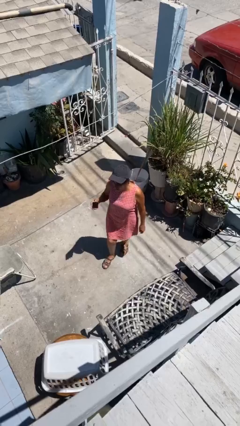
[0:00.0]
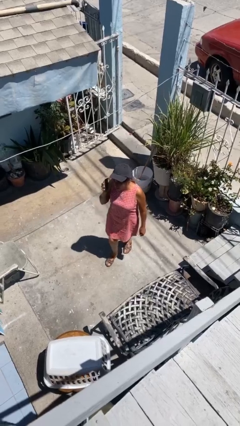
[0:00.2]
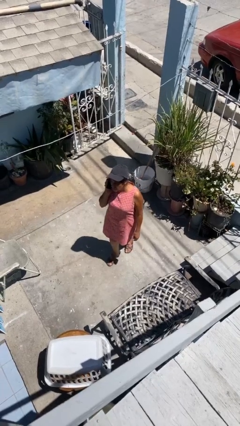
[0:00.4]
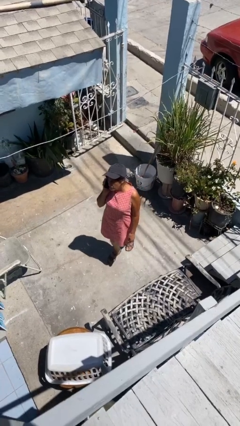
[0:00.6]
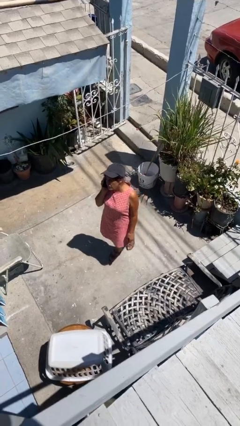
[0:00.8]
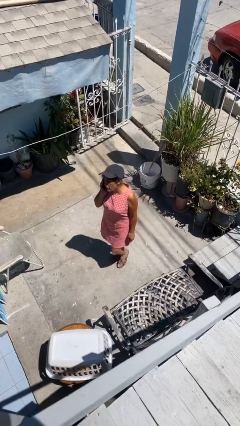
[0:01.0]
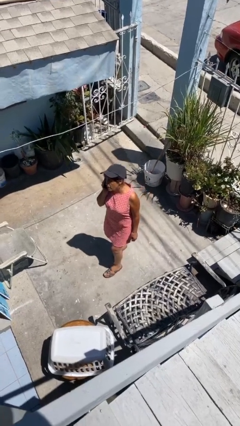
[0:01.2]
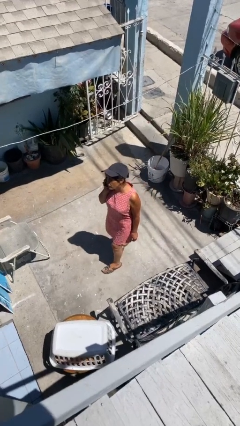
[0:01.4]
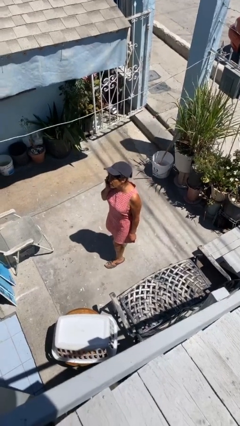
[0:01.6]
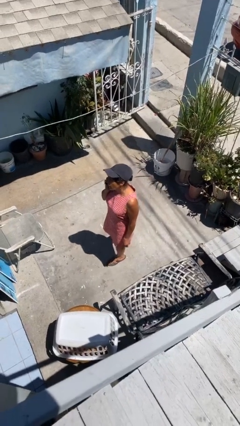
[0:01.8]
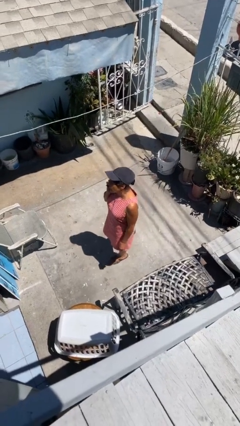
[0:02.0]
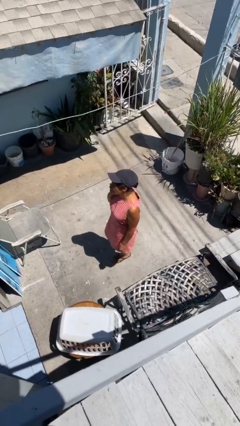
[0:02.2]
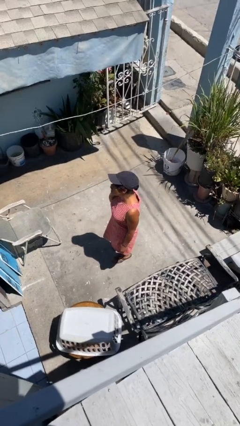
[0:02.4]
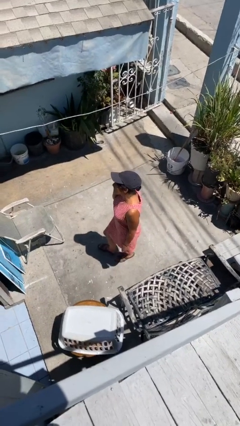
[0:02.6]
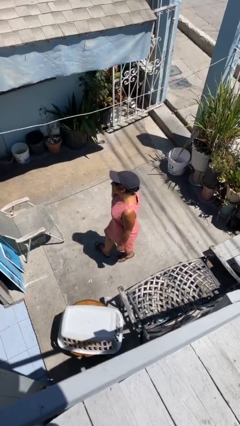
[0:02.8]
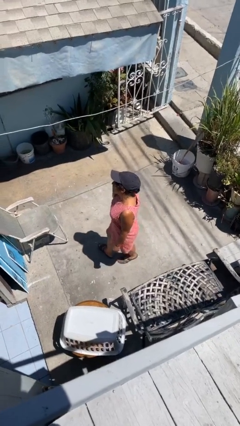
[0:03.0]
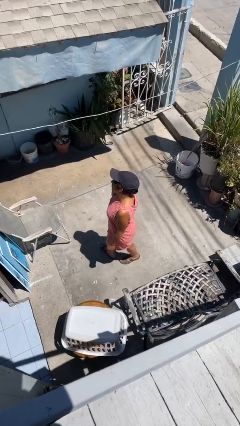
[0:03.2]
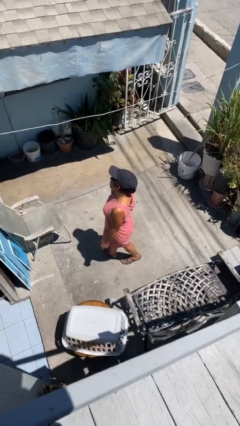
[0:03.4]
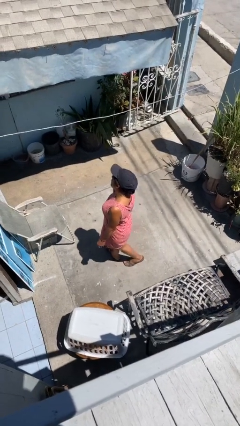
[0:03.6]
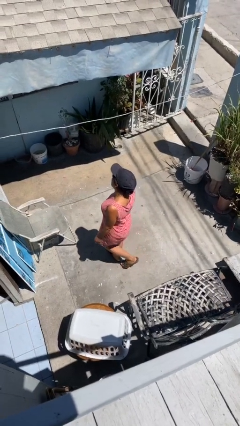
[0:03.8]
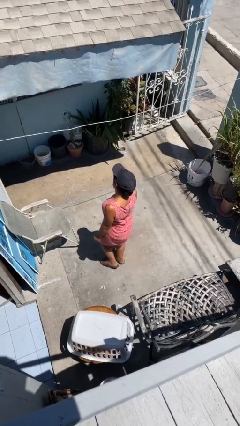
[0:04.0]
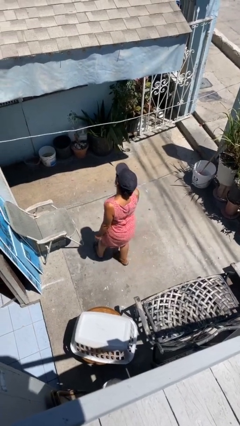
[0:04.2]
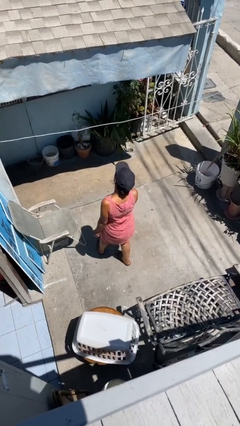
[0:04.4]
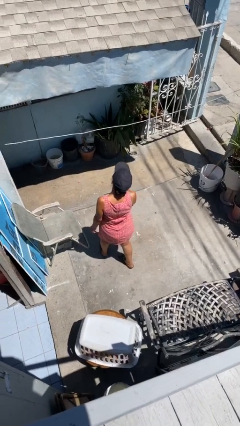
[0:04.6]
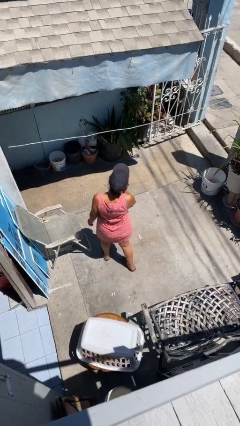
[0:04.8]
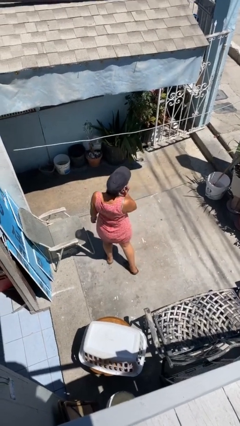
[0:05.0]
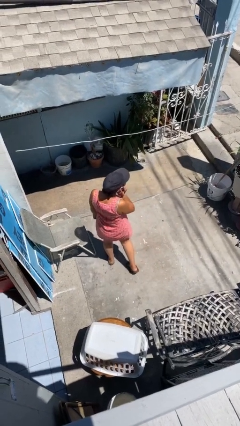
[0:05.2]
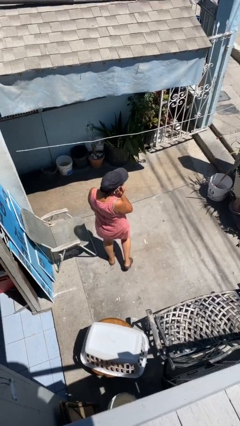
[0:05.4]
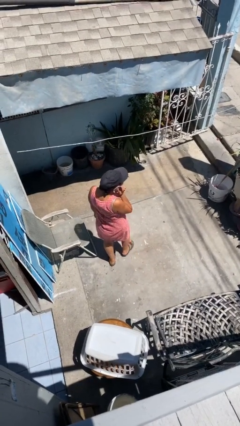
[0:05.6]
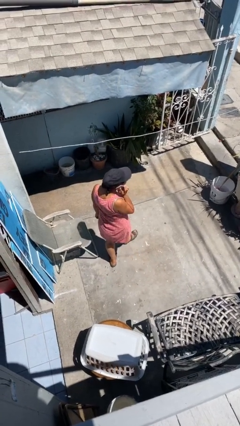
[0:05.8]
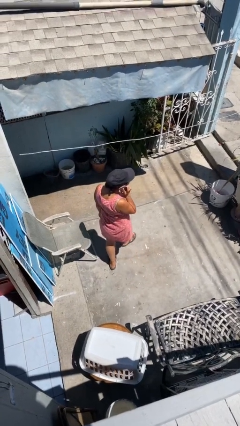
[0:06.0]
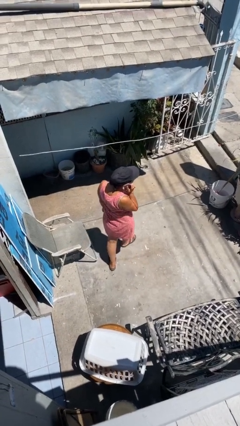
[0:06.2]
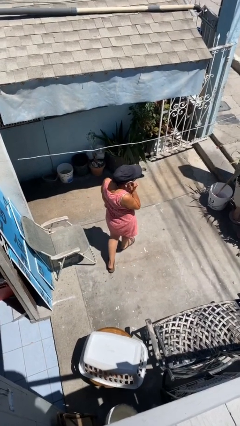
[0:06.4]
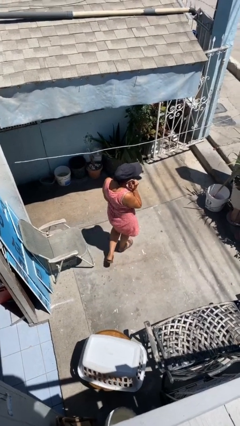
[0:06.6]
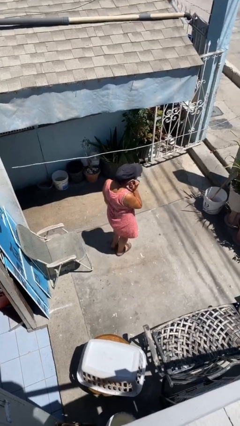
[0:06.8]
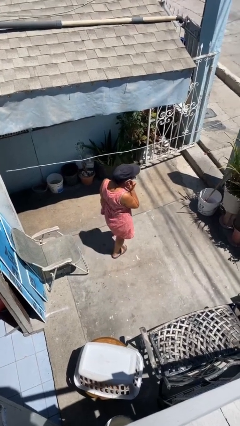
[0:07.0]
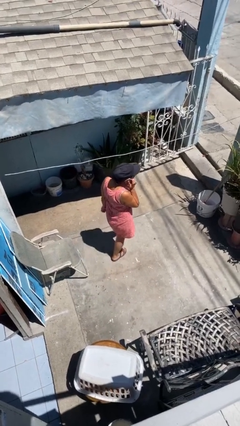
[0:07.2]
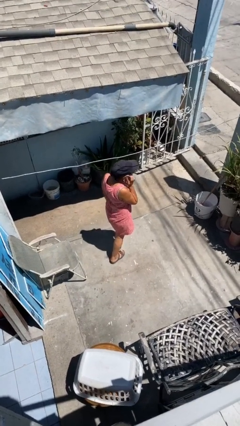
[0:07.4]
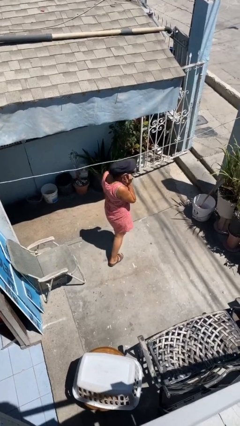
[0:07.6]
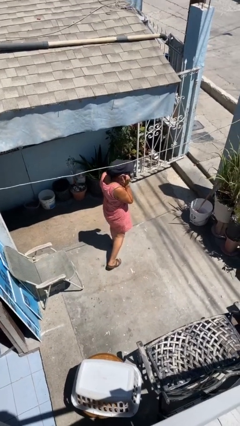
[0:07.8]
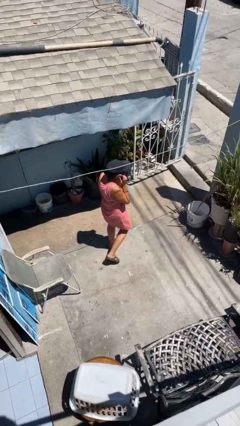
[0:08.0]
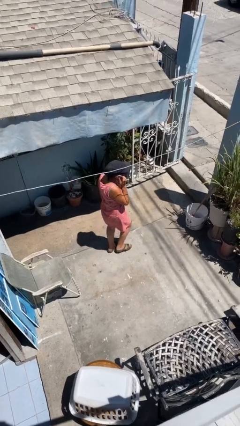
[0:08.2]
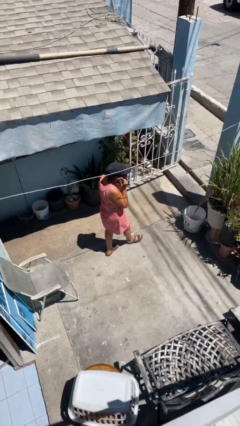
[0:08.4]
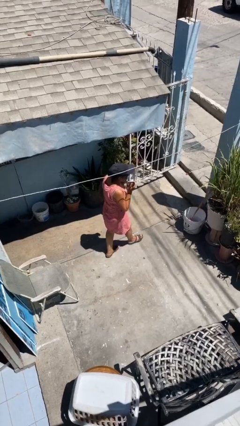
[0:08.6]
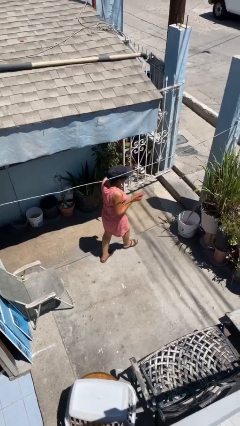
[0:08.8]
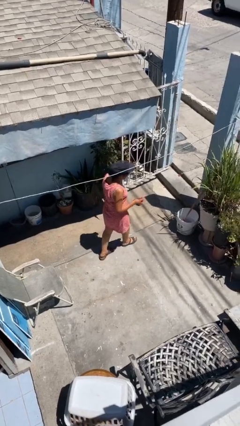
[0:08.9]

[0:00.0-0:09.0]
person talks on phone

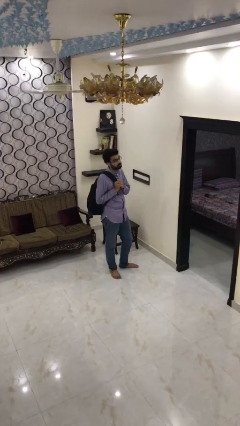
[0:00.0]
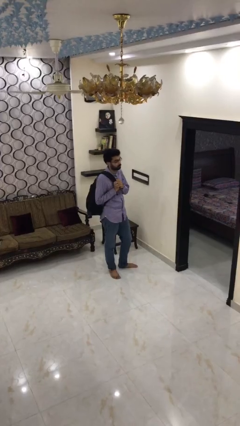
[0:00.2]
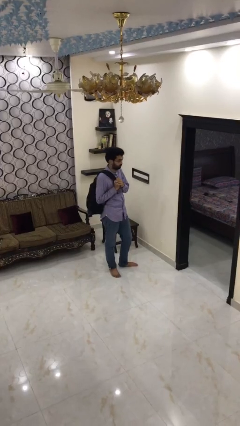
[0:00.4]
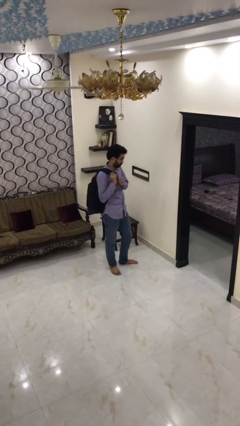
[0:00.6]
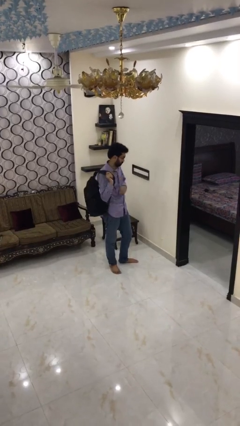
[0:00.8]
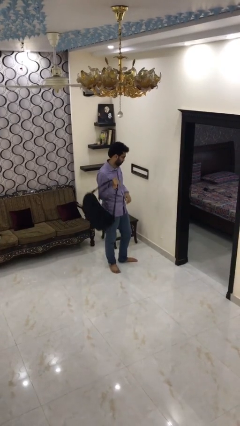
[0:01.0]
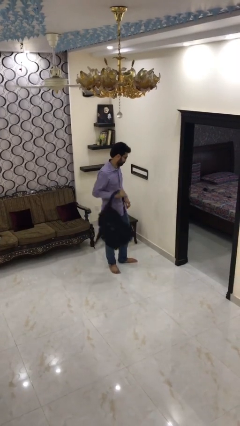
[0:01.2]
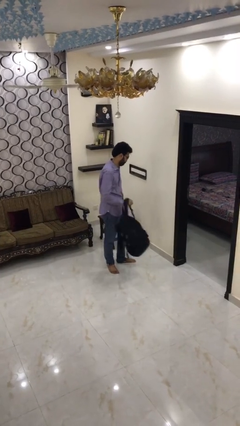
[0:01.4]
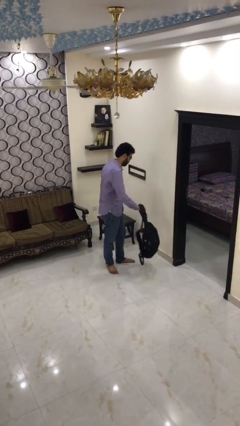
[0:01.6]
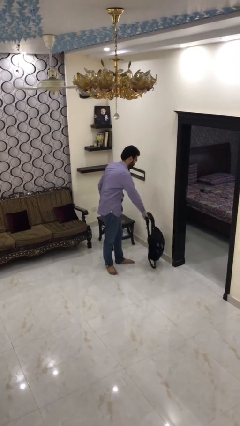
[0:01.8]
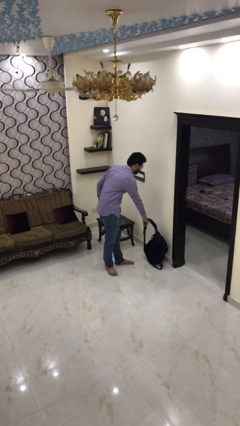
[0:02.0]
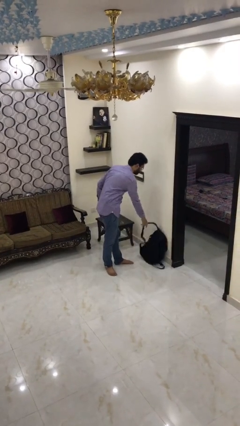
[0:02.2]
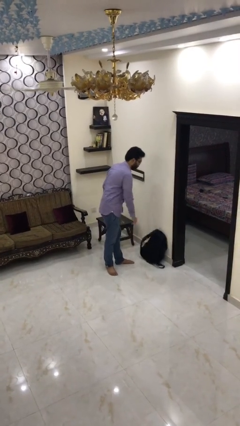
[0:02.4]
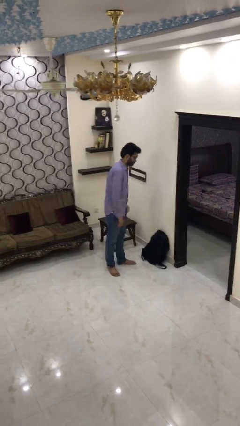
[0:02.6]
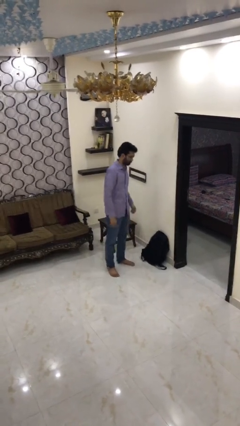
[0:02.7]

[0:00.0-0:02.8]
person puts down object on floor

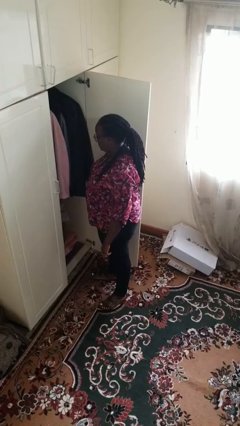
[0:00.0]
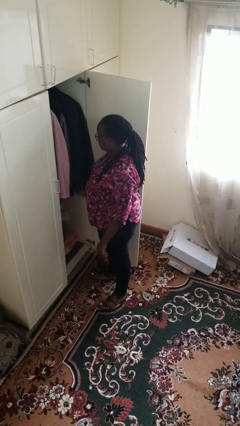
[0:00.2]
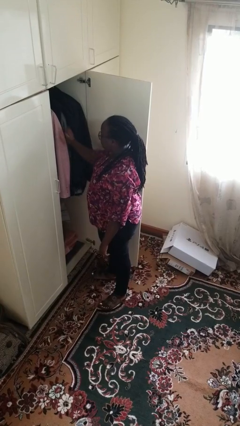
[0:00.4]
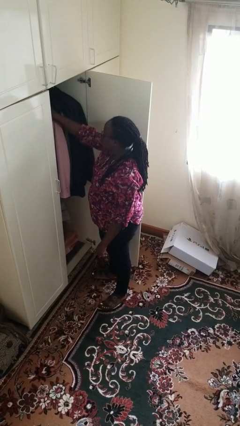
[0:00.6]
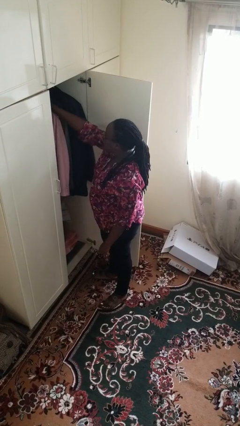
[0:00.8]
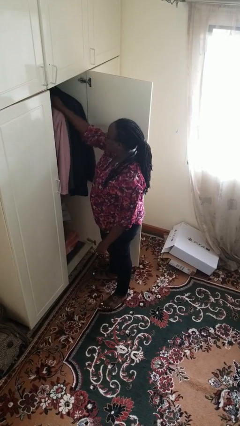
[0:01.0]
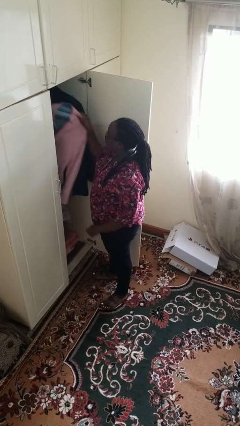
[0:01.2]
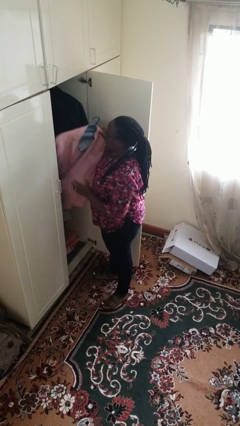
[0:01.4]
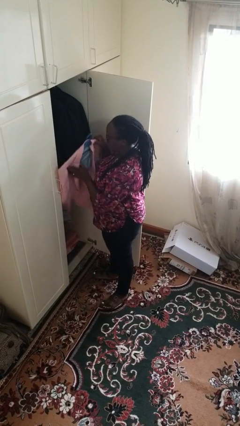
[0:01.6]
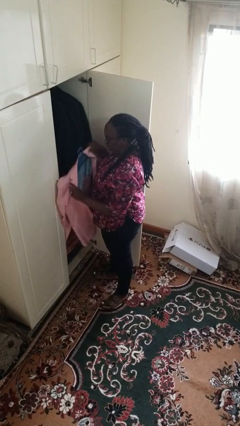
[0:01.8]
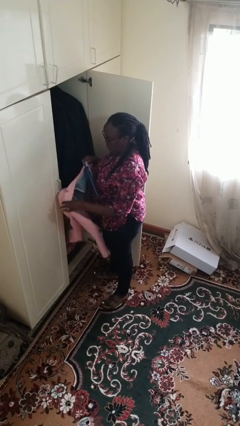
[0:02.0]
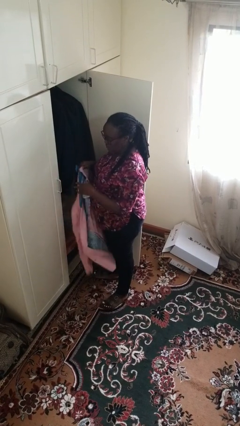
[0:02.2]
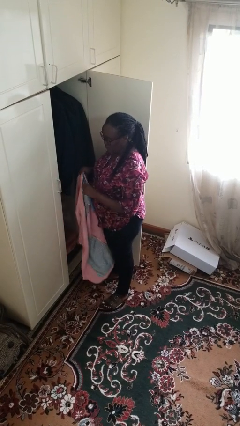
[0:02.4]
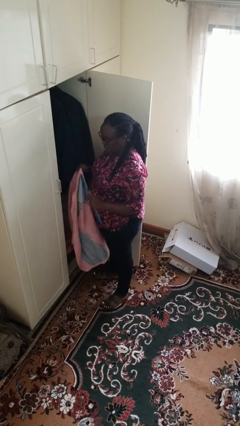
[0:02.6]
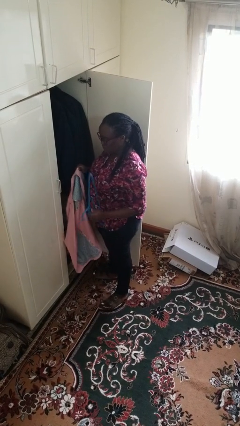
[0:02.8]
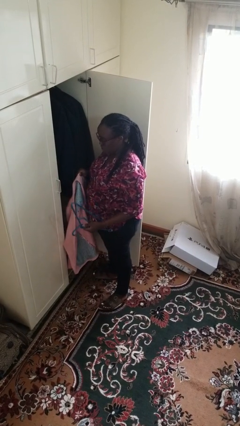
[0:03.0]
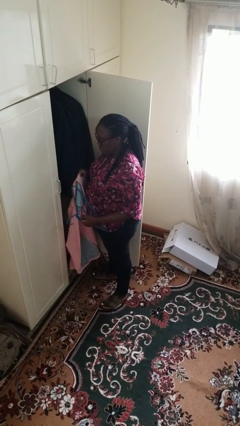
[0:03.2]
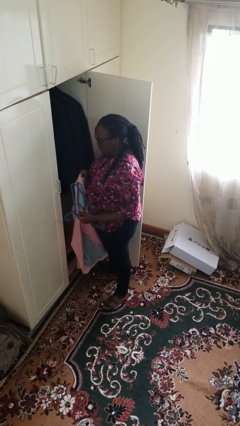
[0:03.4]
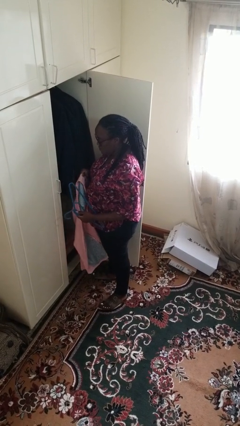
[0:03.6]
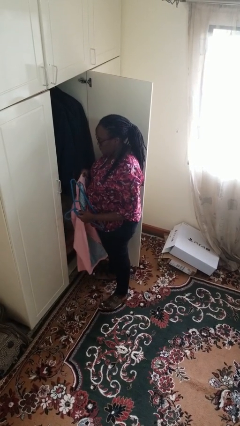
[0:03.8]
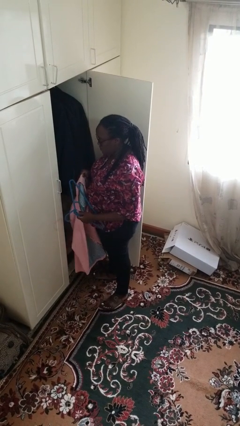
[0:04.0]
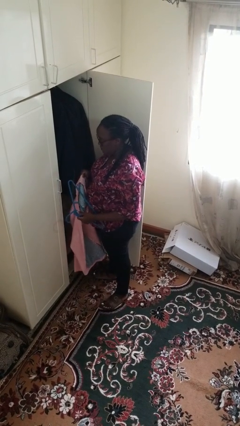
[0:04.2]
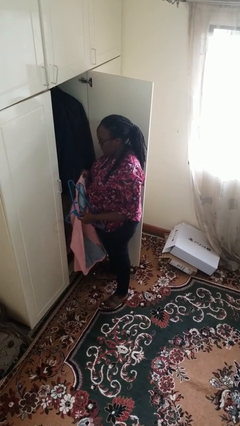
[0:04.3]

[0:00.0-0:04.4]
person takes clothes from closet

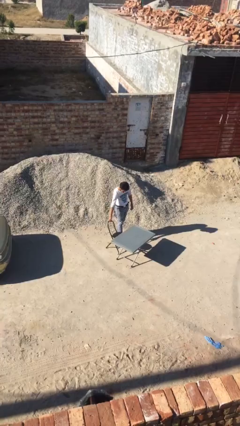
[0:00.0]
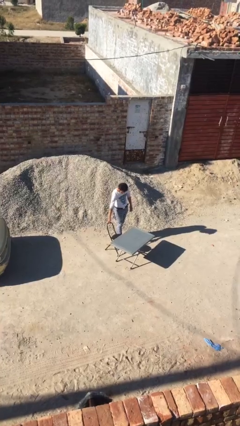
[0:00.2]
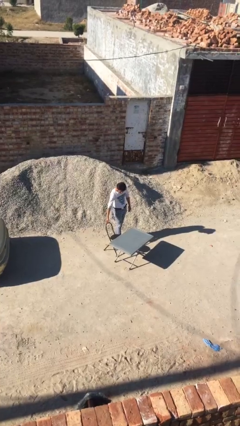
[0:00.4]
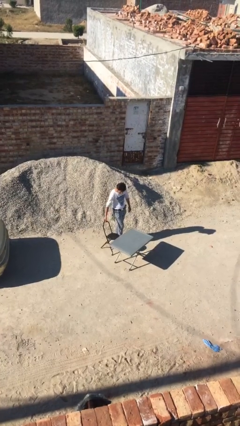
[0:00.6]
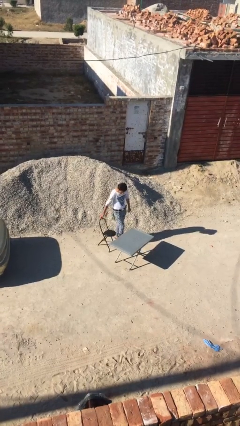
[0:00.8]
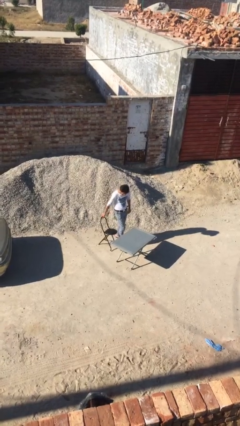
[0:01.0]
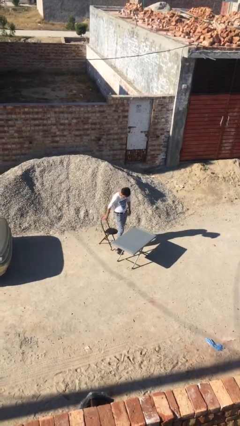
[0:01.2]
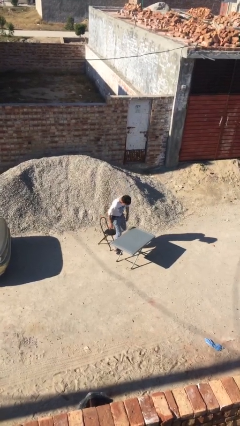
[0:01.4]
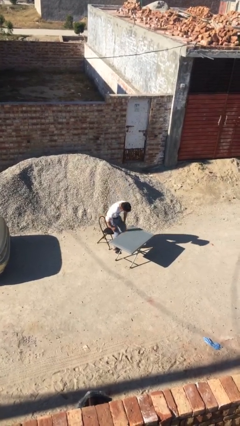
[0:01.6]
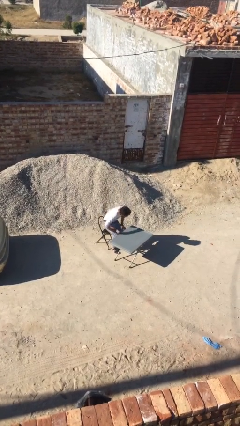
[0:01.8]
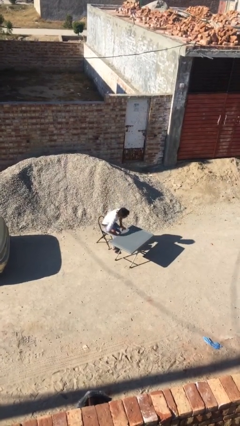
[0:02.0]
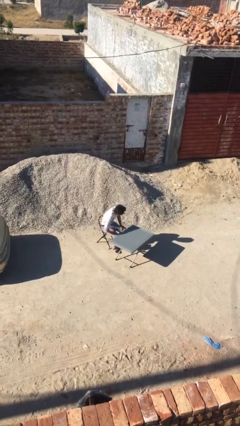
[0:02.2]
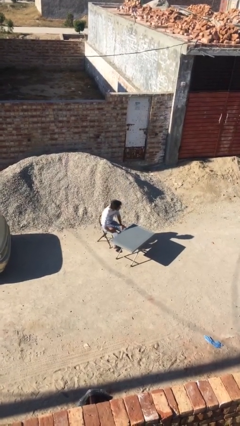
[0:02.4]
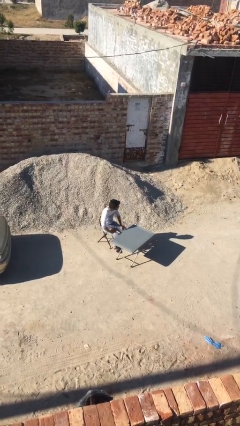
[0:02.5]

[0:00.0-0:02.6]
person sits down
